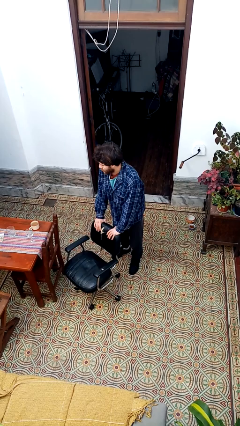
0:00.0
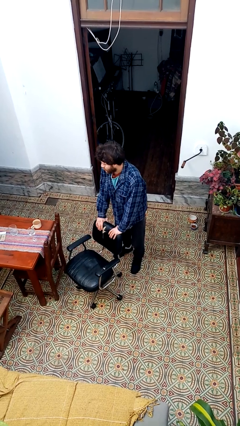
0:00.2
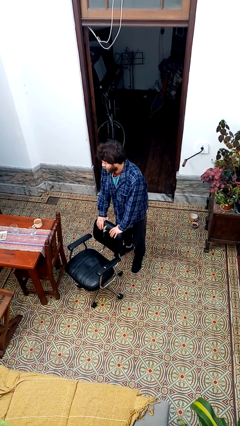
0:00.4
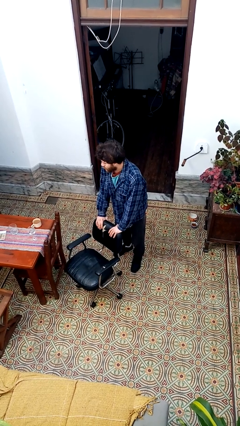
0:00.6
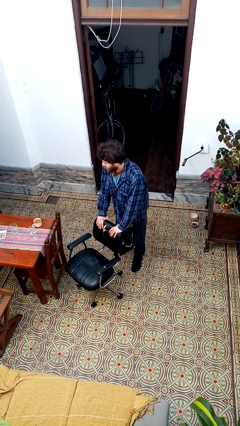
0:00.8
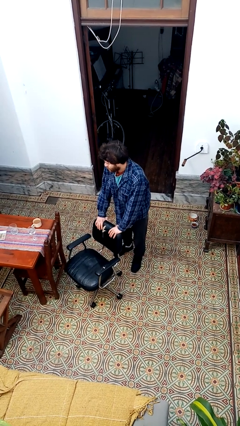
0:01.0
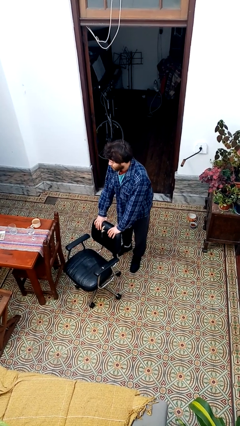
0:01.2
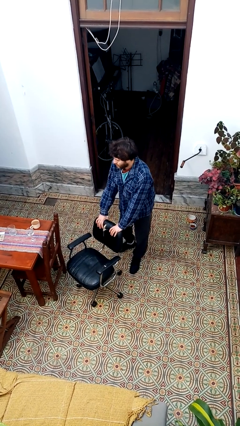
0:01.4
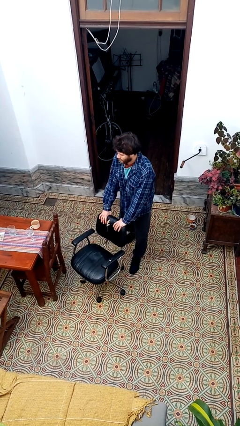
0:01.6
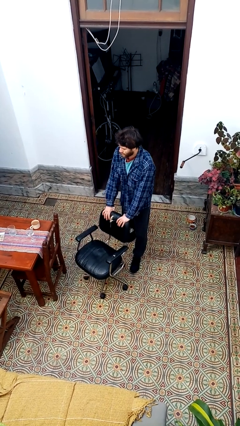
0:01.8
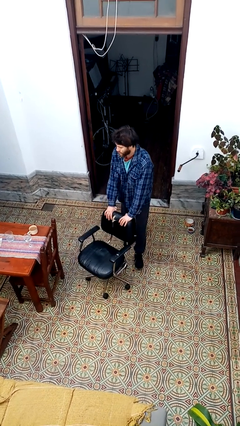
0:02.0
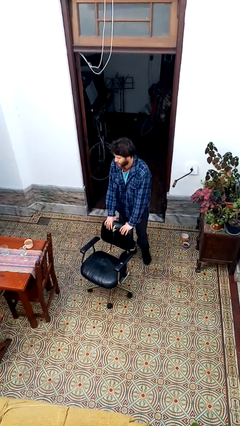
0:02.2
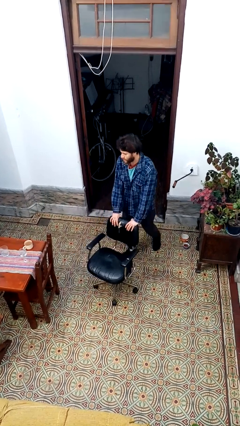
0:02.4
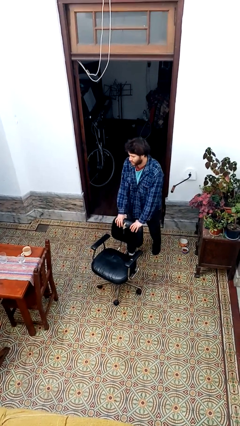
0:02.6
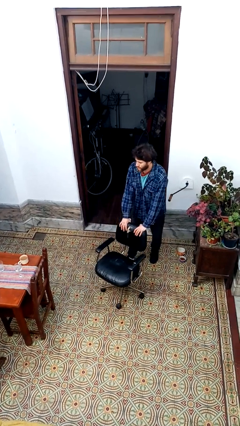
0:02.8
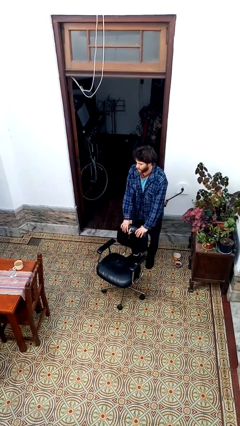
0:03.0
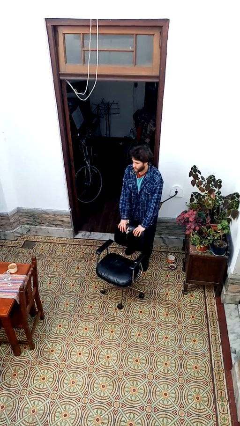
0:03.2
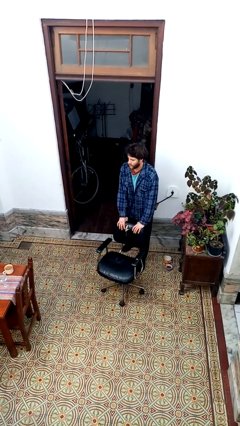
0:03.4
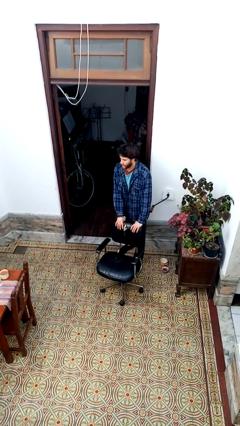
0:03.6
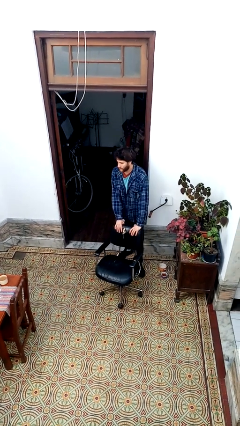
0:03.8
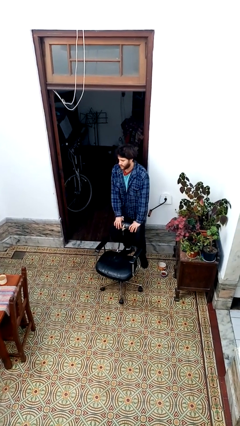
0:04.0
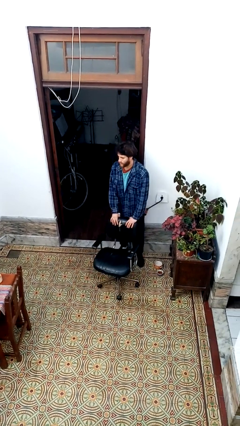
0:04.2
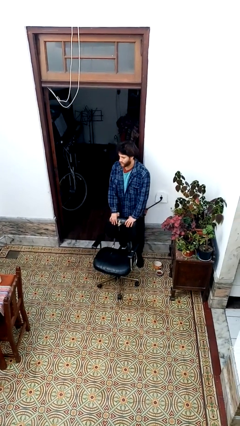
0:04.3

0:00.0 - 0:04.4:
person pulls wheeled cart

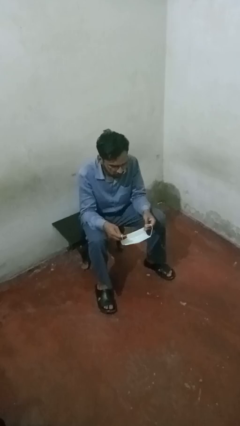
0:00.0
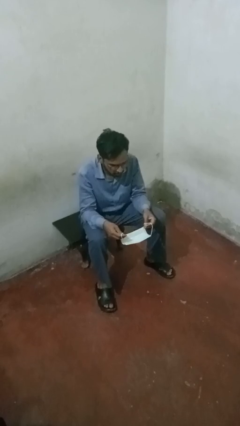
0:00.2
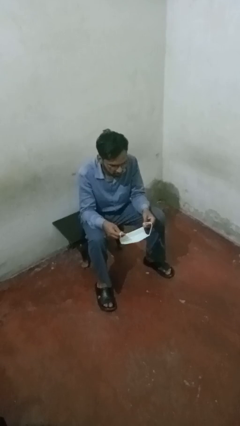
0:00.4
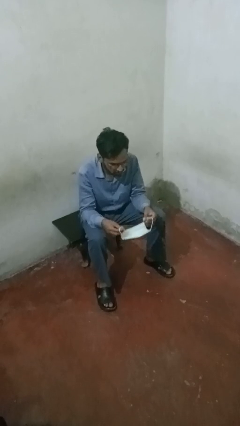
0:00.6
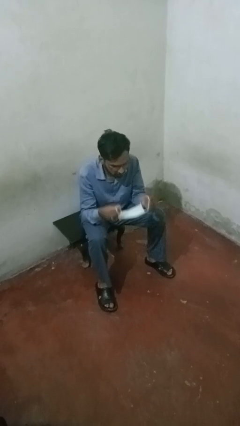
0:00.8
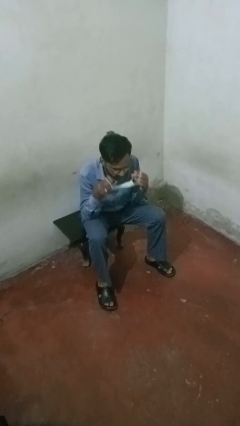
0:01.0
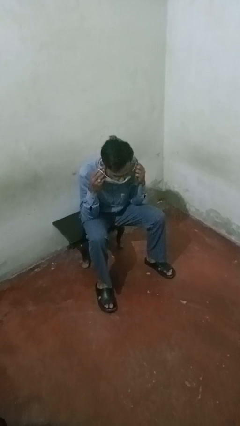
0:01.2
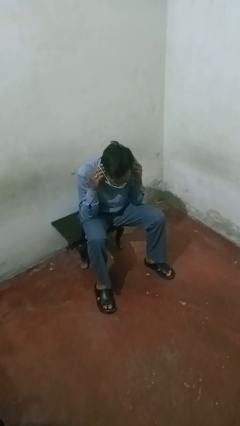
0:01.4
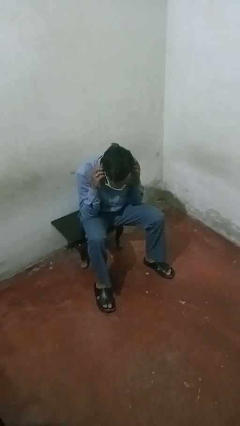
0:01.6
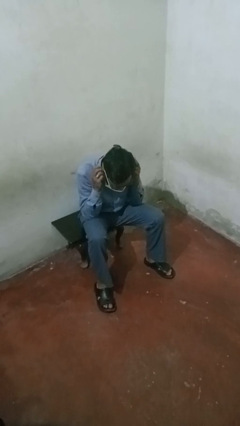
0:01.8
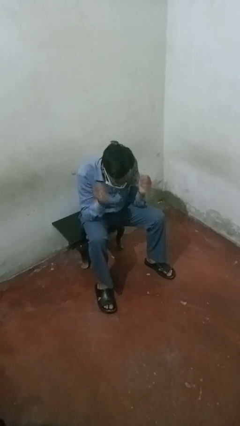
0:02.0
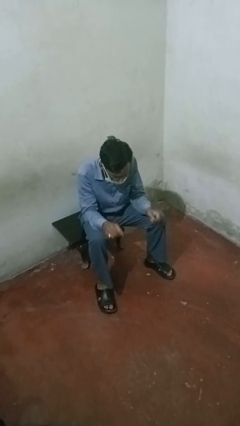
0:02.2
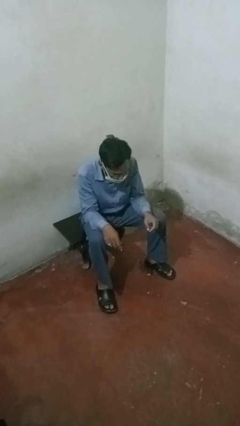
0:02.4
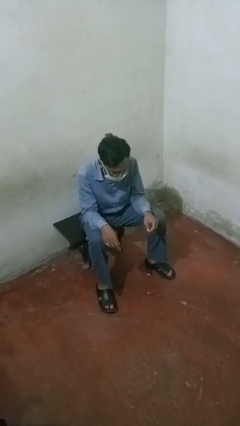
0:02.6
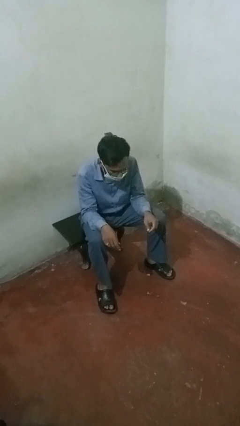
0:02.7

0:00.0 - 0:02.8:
person puts on facemask

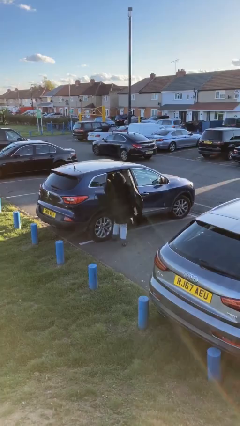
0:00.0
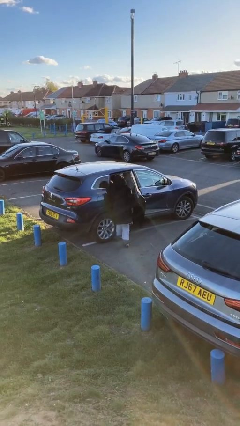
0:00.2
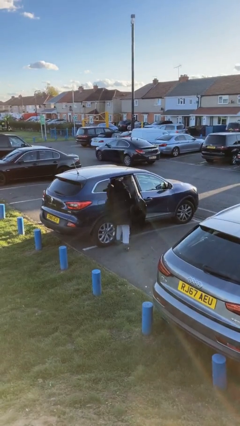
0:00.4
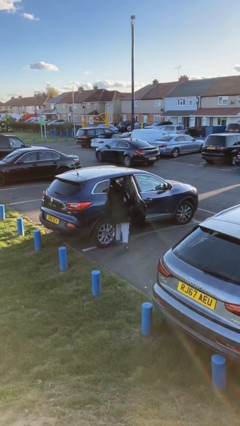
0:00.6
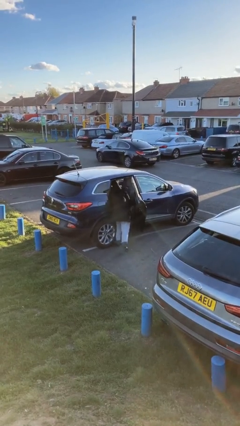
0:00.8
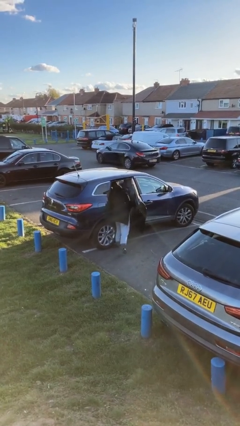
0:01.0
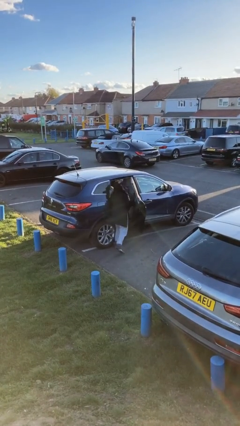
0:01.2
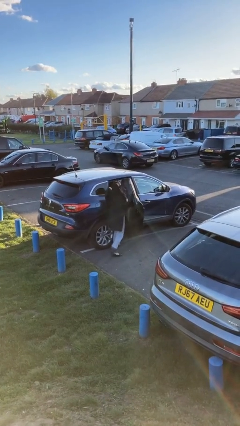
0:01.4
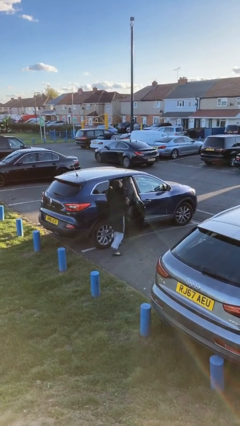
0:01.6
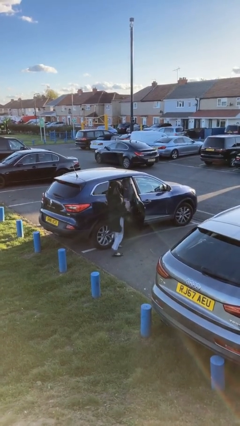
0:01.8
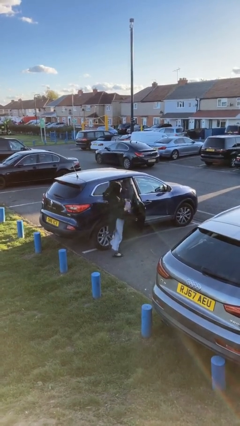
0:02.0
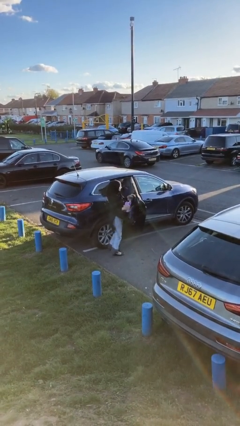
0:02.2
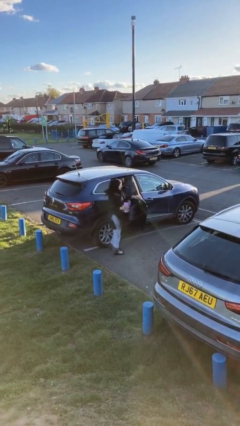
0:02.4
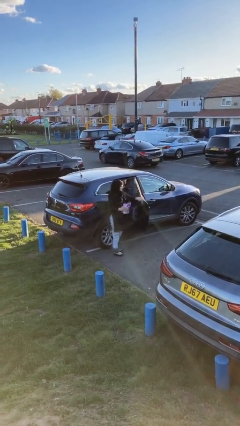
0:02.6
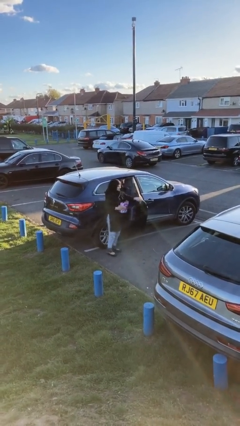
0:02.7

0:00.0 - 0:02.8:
person unloads car

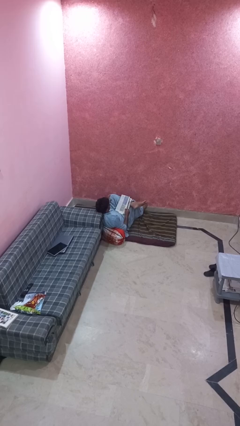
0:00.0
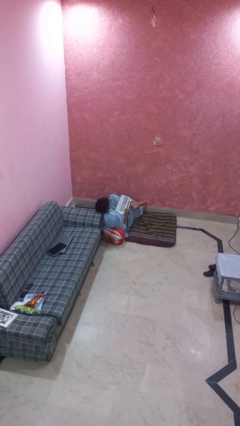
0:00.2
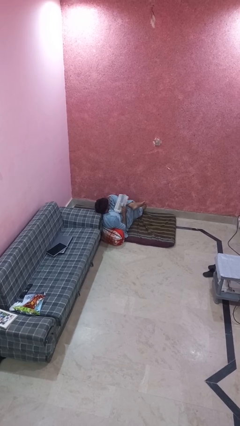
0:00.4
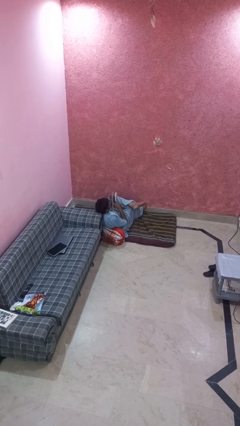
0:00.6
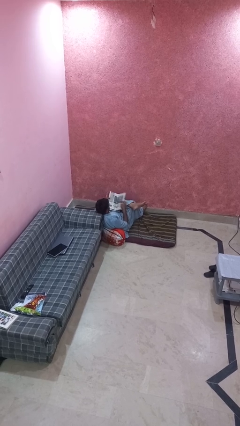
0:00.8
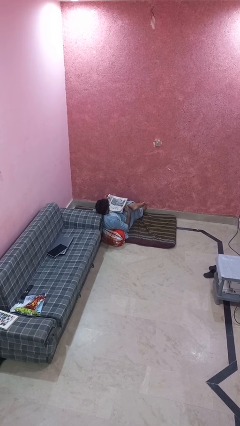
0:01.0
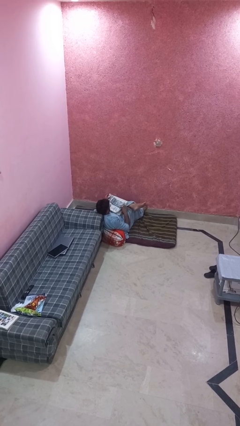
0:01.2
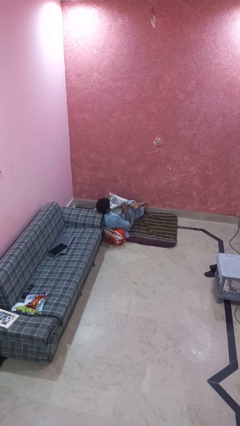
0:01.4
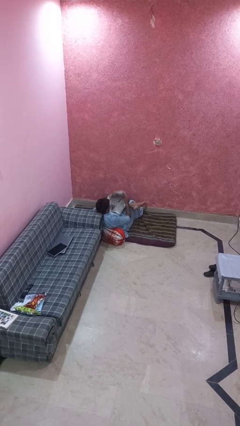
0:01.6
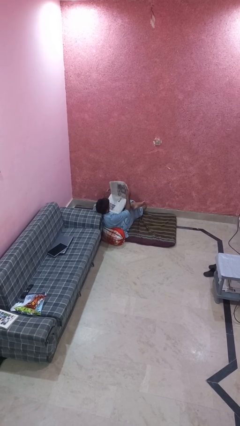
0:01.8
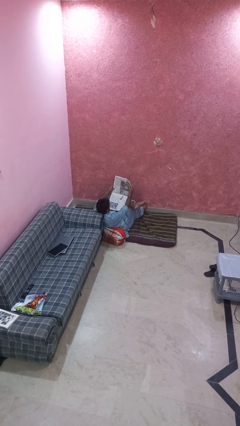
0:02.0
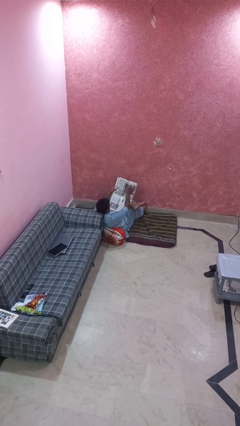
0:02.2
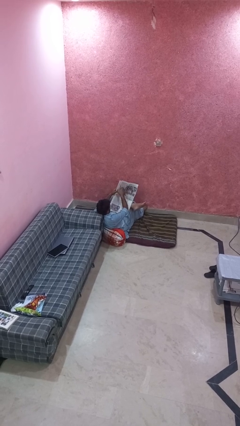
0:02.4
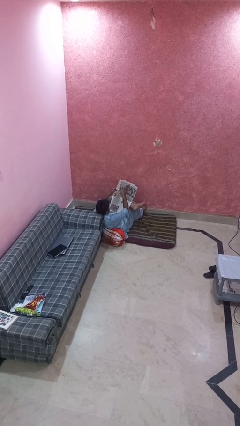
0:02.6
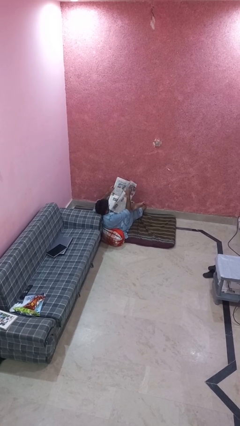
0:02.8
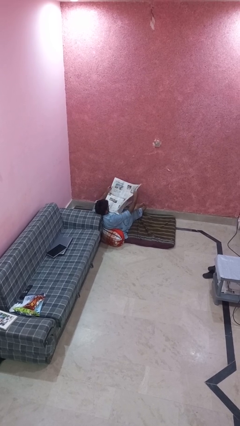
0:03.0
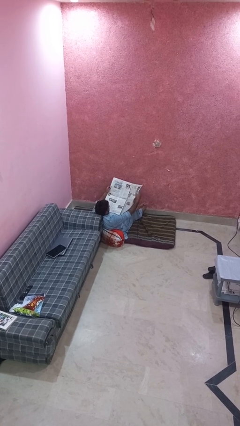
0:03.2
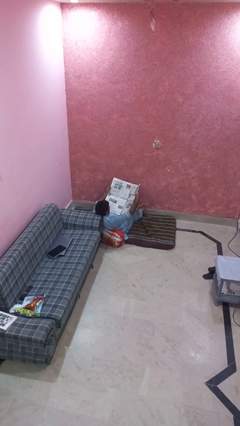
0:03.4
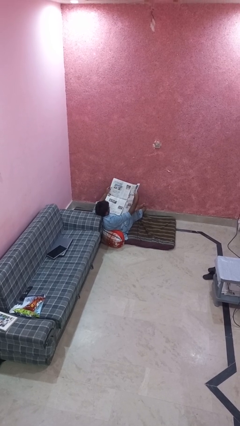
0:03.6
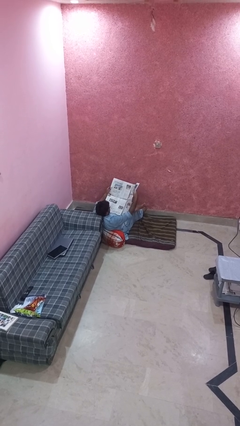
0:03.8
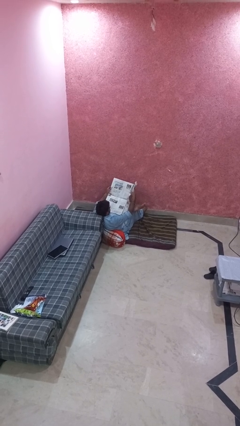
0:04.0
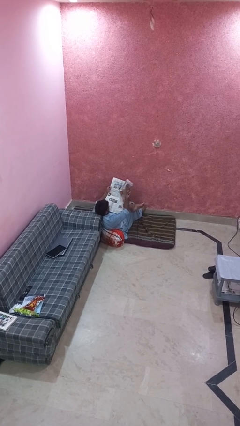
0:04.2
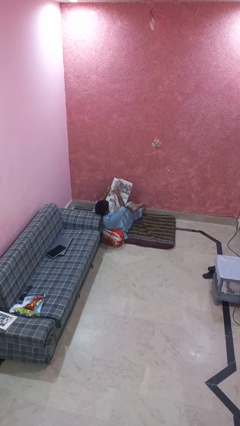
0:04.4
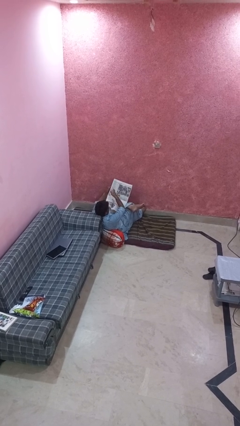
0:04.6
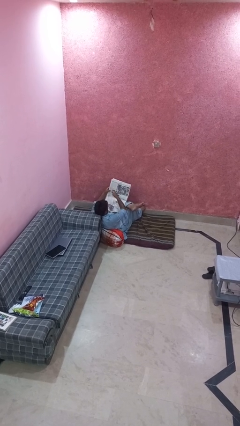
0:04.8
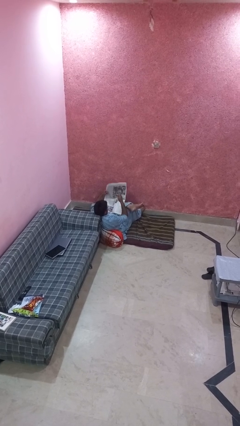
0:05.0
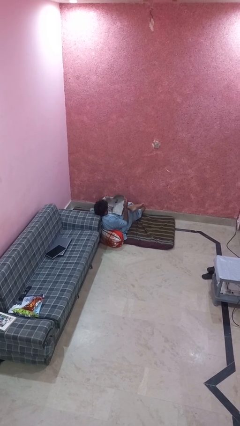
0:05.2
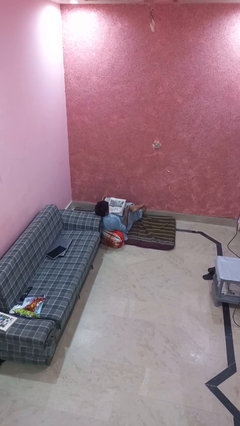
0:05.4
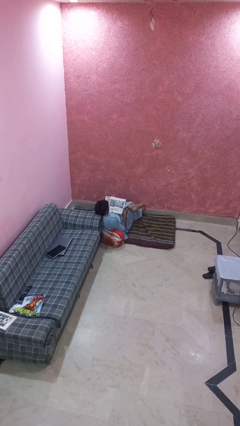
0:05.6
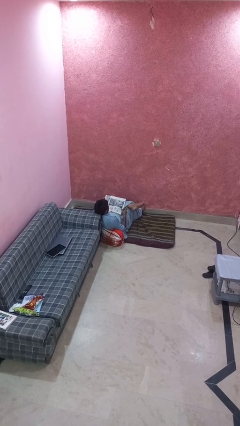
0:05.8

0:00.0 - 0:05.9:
person reads newspaper

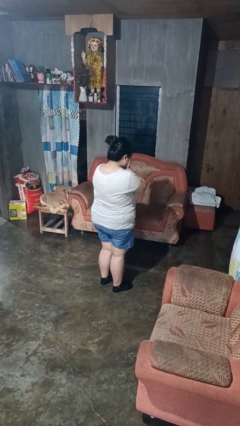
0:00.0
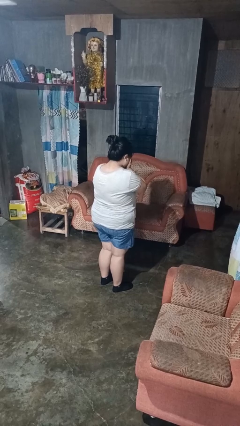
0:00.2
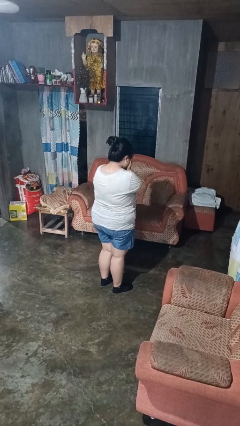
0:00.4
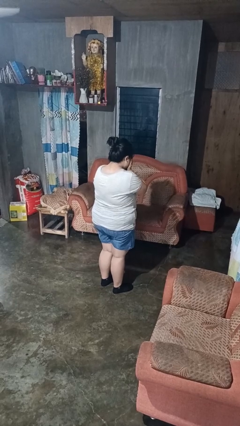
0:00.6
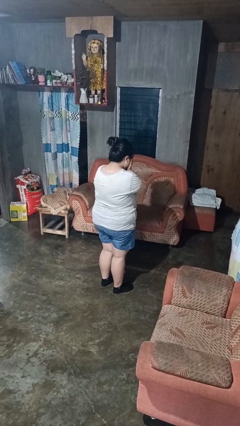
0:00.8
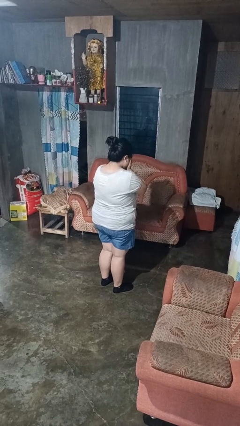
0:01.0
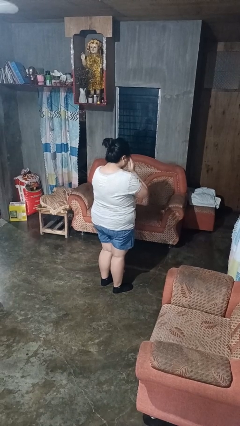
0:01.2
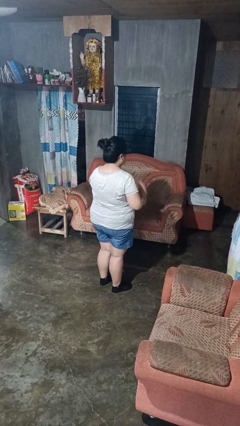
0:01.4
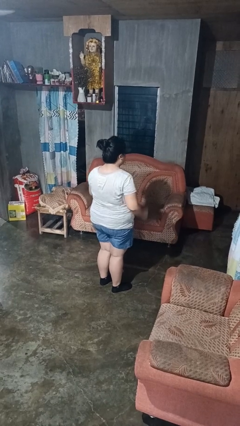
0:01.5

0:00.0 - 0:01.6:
person covers face with hands
